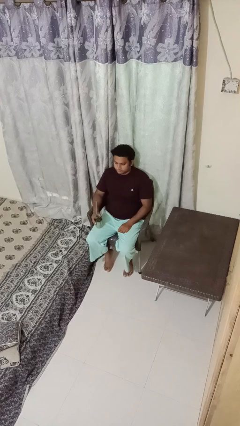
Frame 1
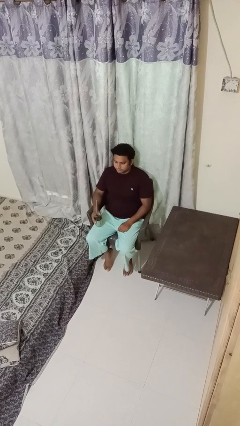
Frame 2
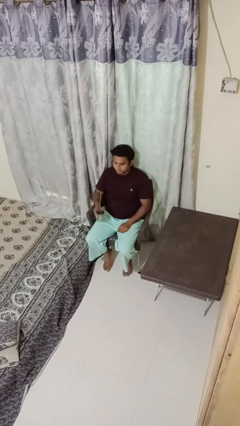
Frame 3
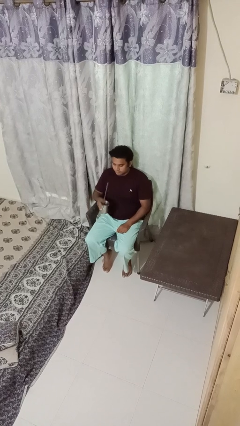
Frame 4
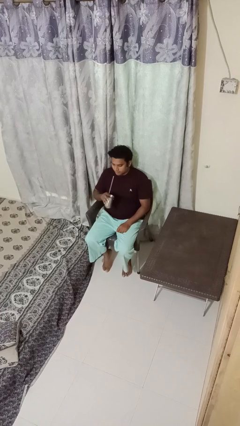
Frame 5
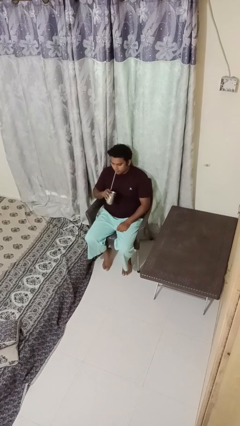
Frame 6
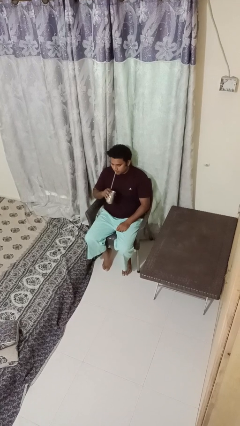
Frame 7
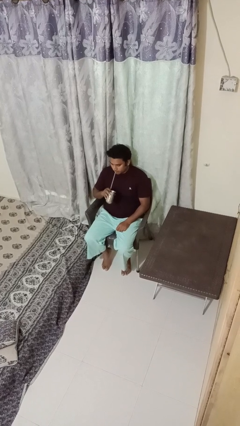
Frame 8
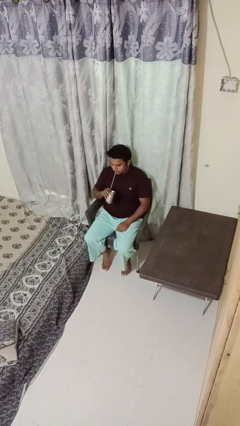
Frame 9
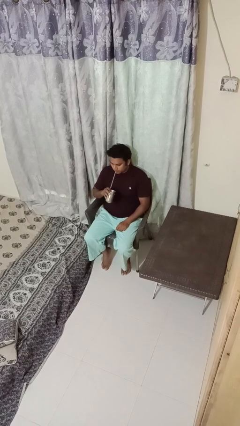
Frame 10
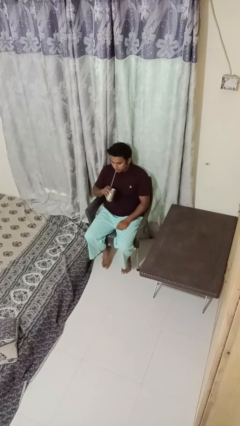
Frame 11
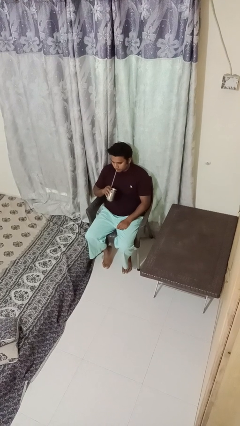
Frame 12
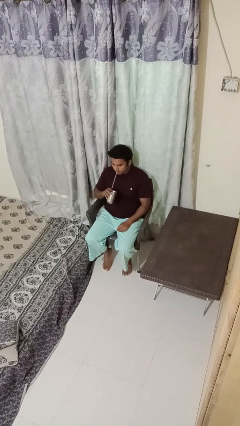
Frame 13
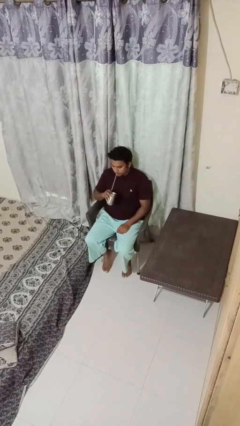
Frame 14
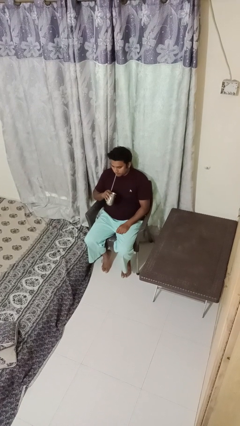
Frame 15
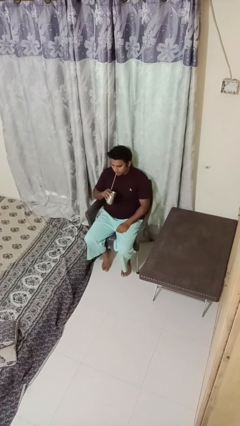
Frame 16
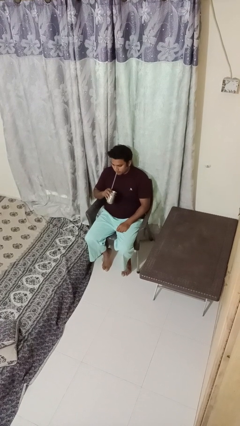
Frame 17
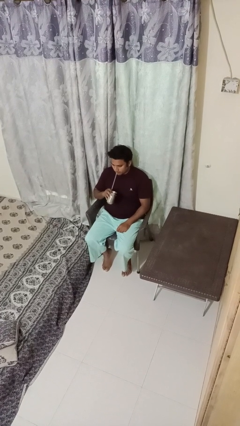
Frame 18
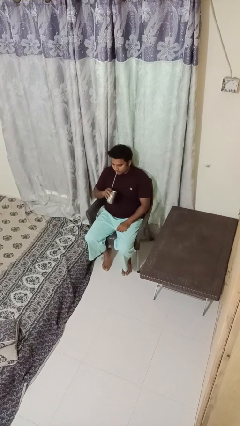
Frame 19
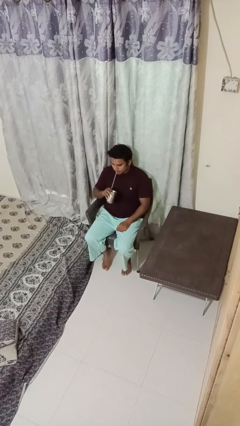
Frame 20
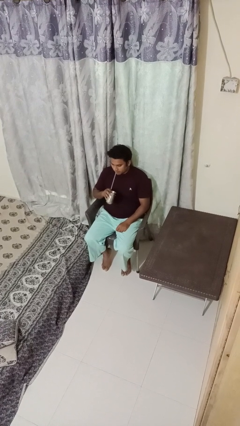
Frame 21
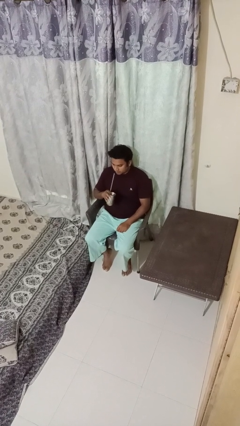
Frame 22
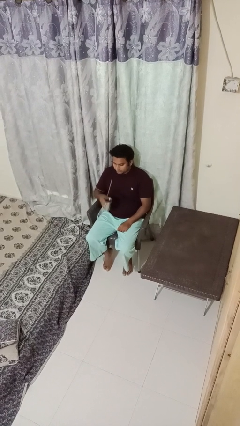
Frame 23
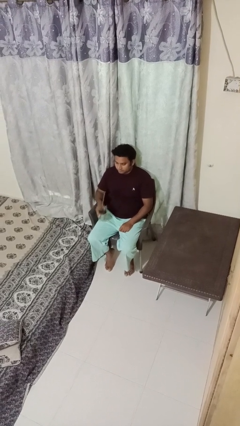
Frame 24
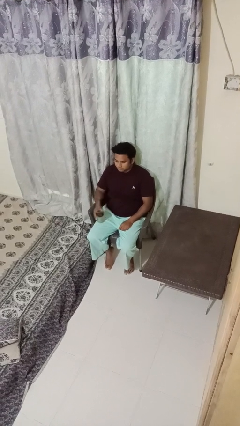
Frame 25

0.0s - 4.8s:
person drinks from straw

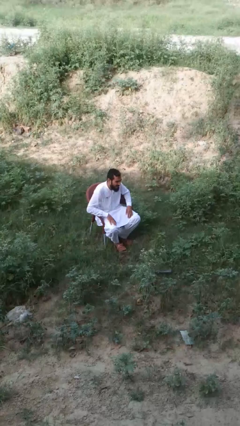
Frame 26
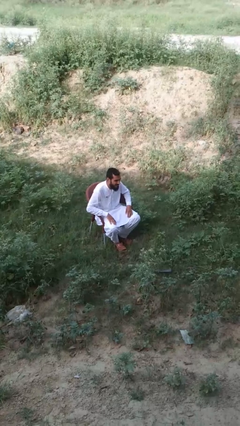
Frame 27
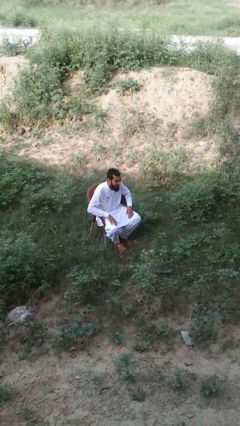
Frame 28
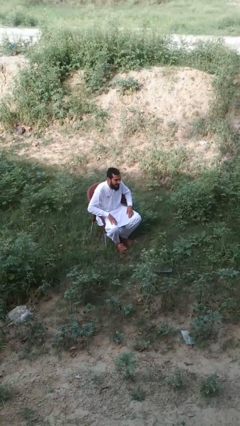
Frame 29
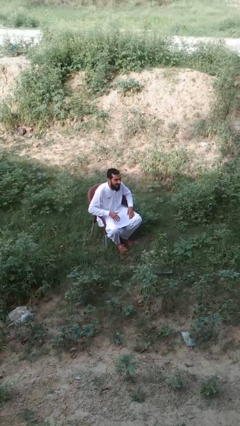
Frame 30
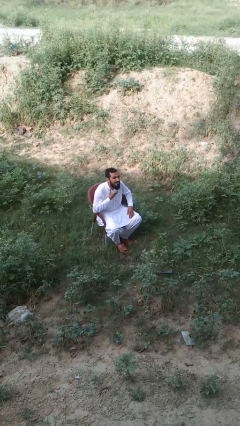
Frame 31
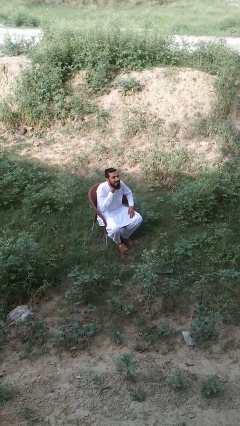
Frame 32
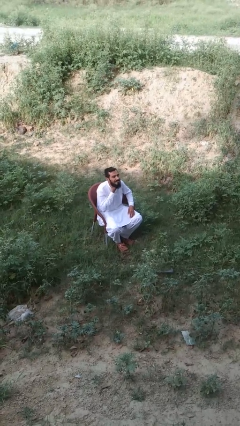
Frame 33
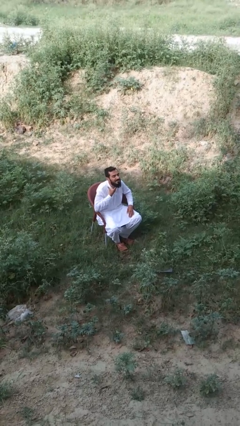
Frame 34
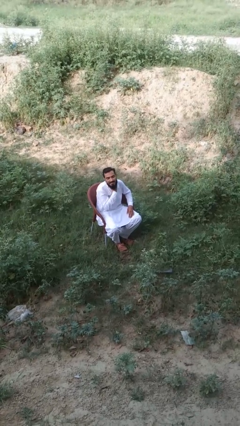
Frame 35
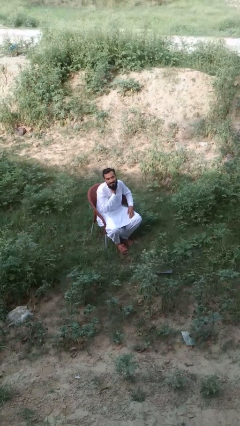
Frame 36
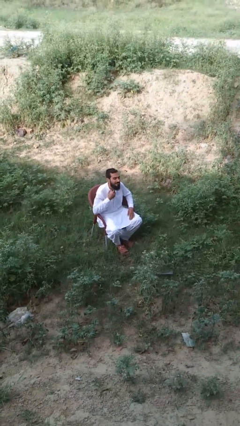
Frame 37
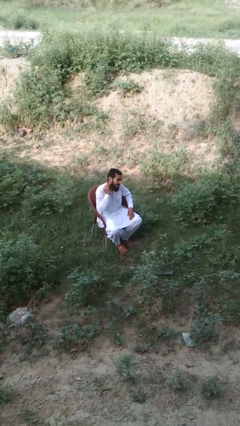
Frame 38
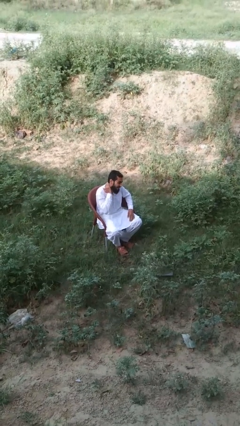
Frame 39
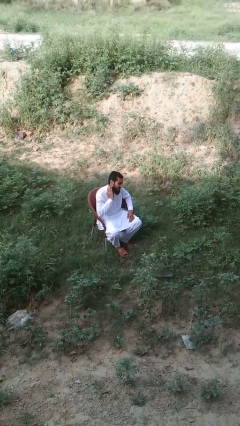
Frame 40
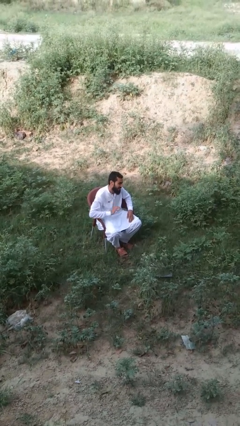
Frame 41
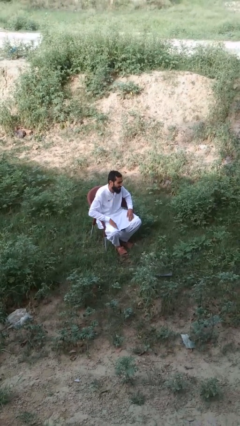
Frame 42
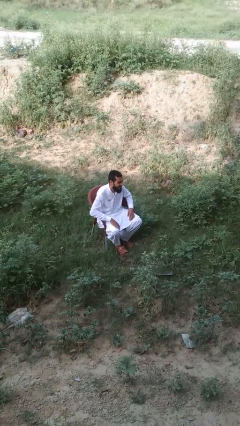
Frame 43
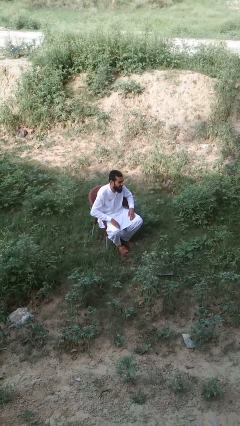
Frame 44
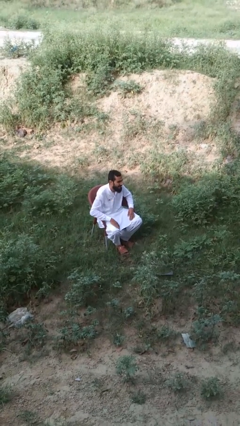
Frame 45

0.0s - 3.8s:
person rubs neck

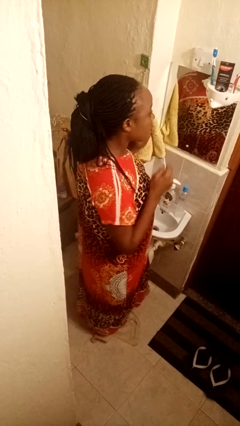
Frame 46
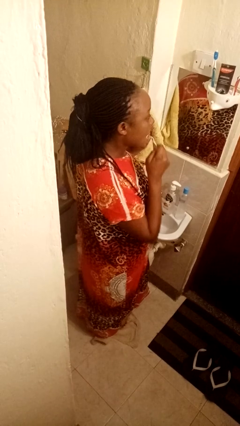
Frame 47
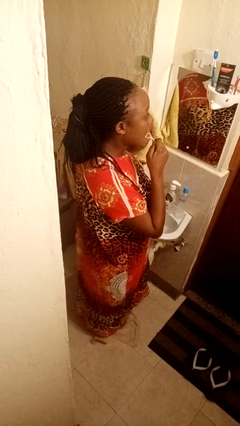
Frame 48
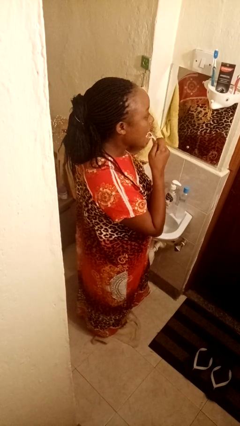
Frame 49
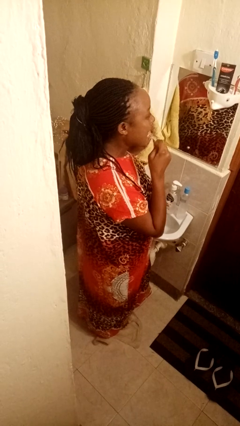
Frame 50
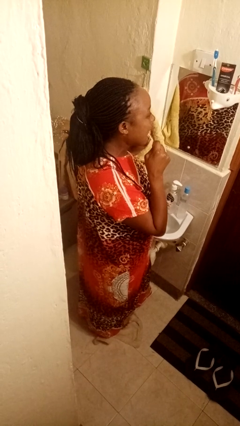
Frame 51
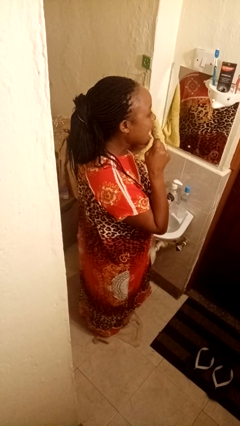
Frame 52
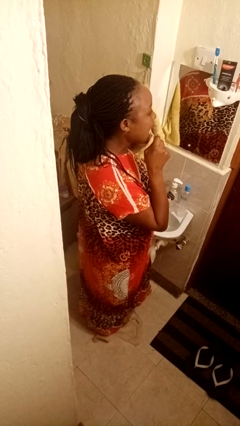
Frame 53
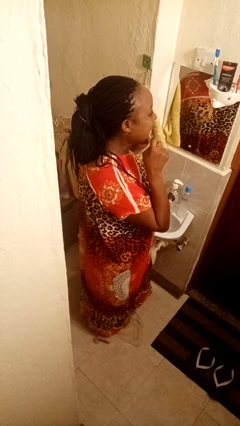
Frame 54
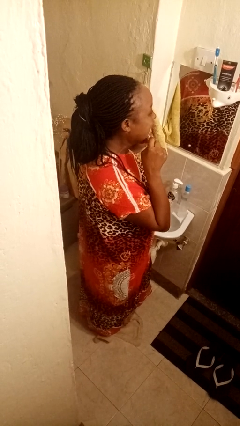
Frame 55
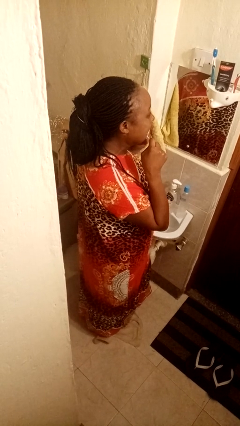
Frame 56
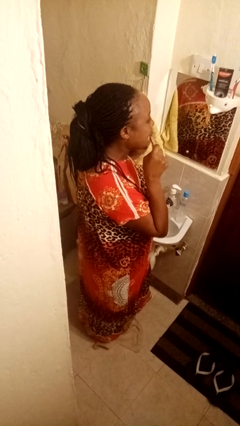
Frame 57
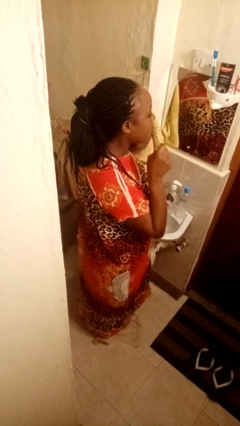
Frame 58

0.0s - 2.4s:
person flosses

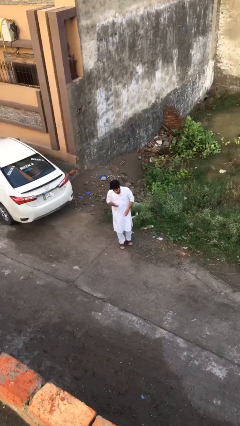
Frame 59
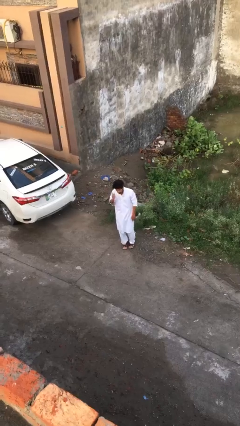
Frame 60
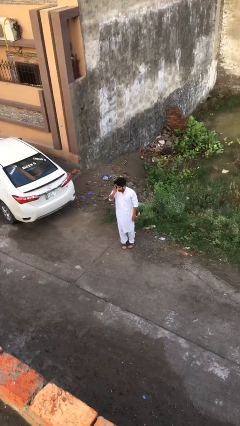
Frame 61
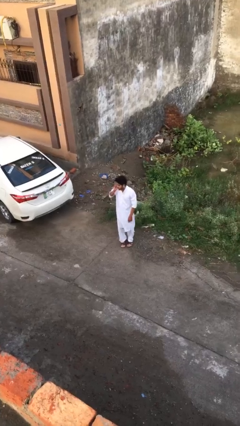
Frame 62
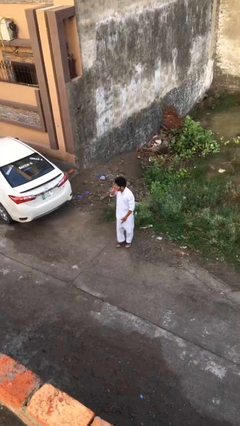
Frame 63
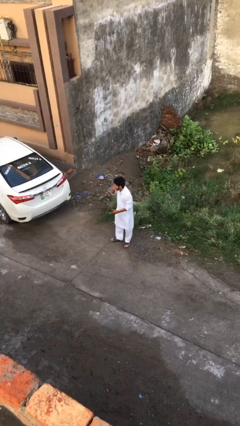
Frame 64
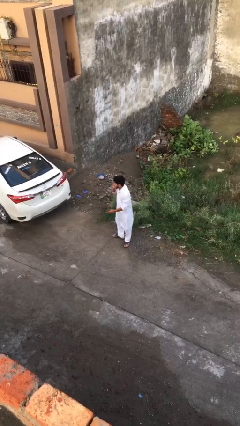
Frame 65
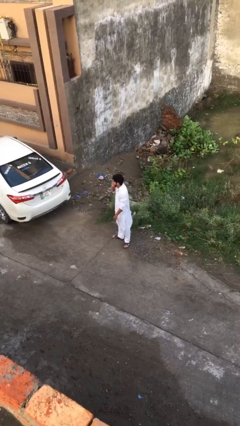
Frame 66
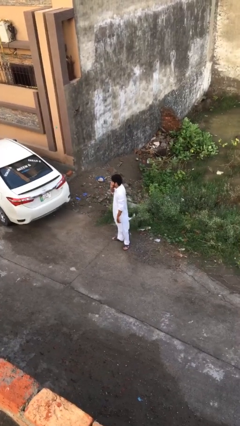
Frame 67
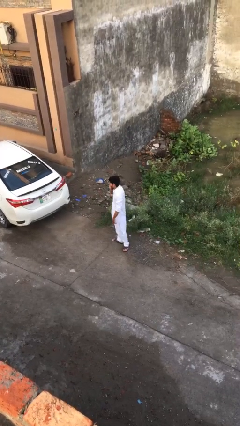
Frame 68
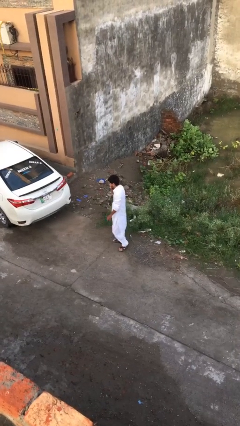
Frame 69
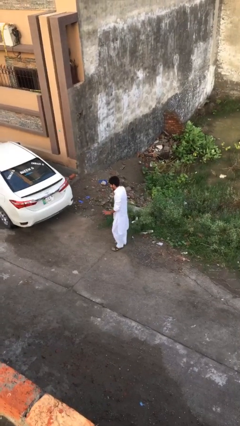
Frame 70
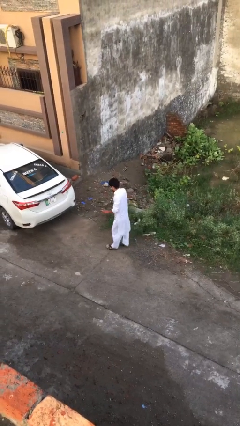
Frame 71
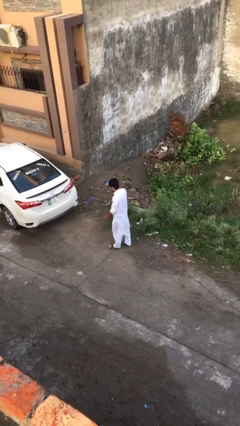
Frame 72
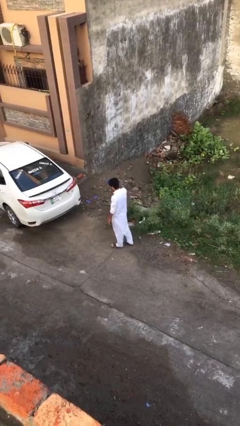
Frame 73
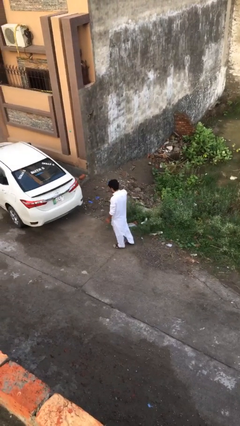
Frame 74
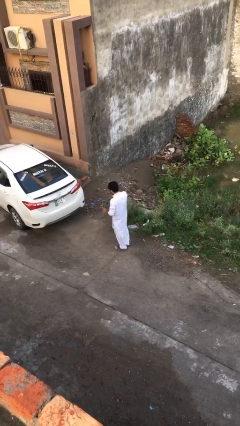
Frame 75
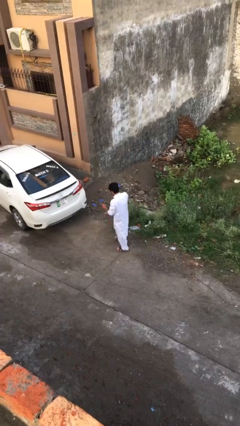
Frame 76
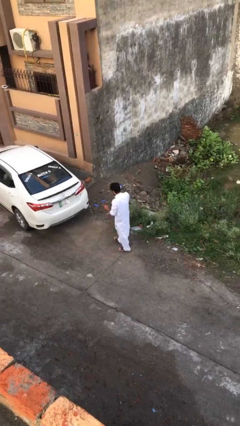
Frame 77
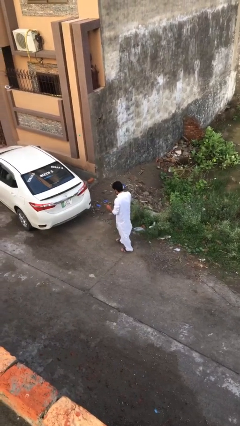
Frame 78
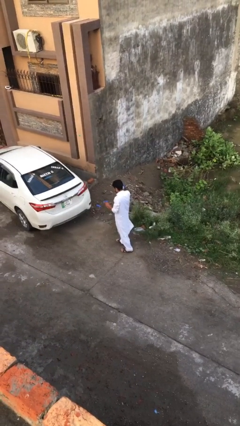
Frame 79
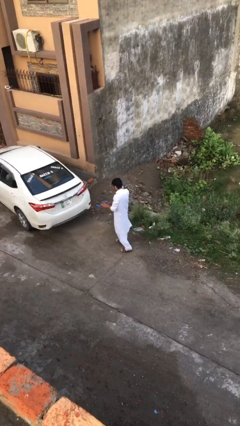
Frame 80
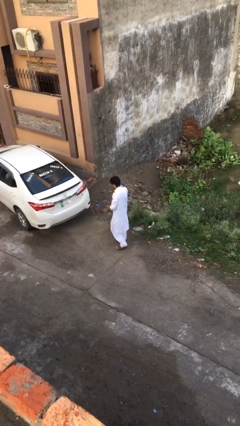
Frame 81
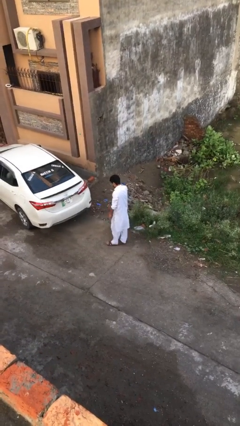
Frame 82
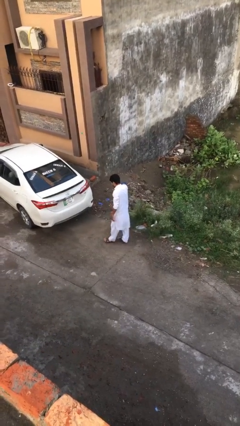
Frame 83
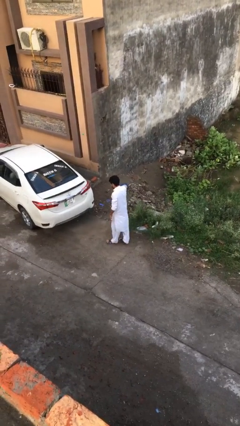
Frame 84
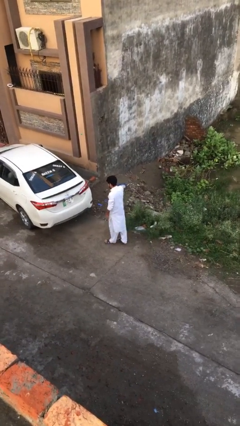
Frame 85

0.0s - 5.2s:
person talks on phone

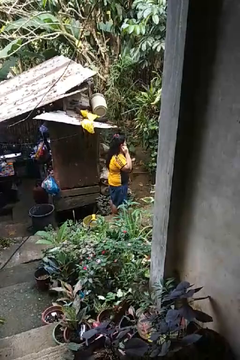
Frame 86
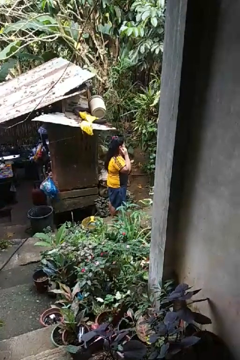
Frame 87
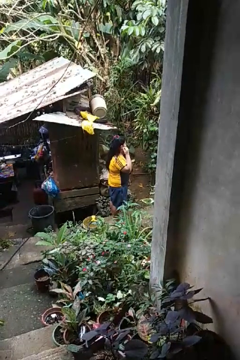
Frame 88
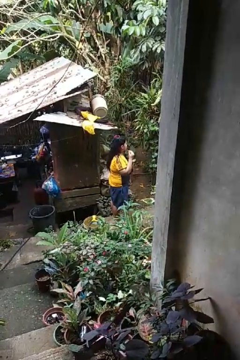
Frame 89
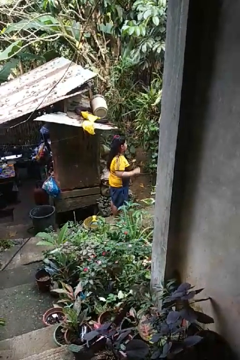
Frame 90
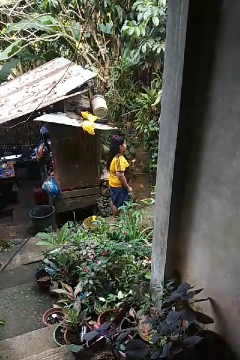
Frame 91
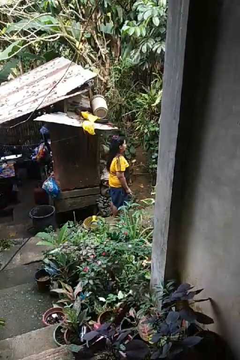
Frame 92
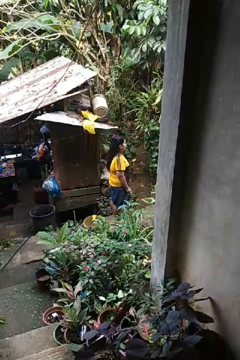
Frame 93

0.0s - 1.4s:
person takes off earrings

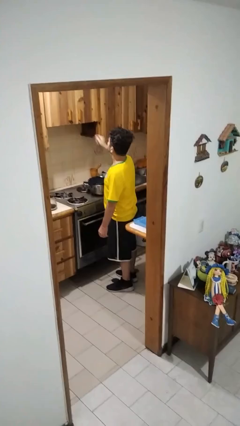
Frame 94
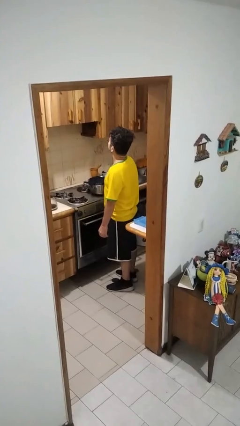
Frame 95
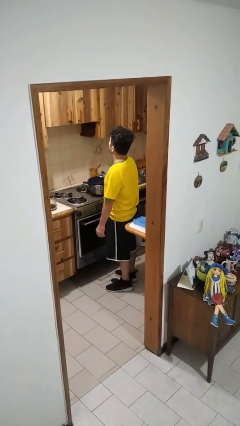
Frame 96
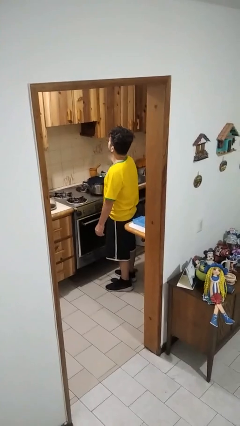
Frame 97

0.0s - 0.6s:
person closes cabinet
